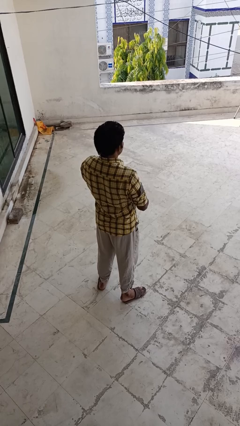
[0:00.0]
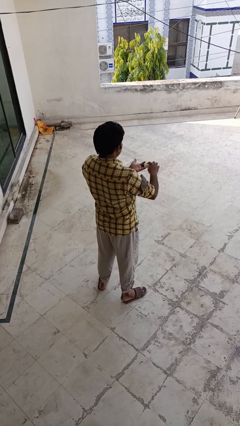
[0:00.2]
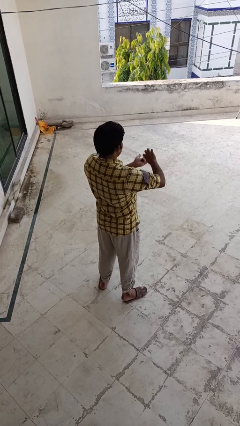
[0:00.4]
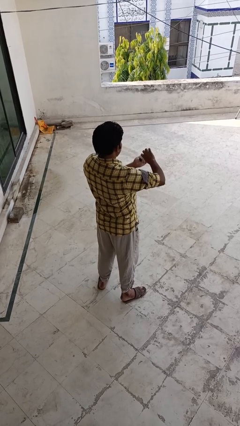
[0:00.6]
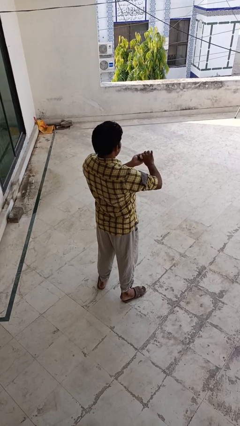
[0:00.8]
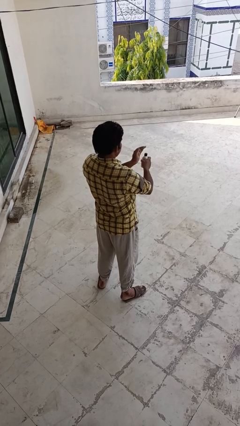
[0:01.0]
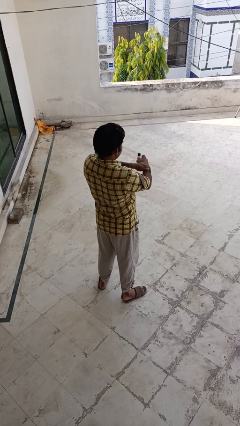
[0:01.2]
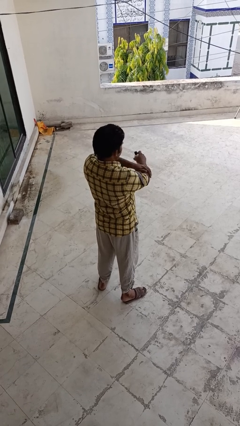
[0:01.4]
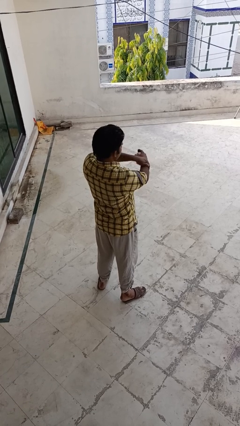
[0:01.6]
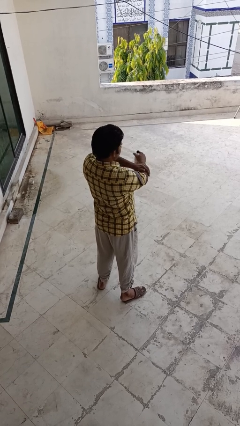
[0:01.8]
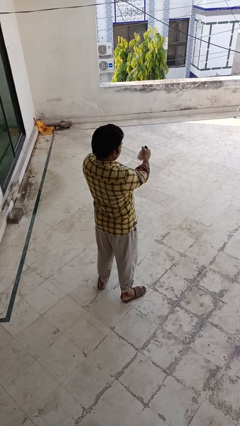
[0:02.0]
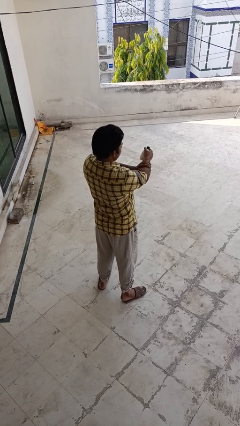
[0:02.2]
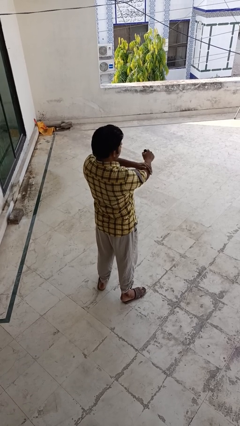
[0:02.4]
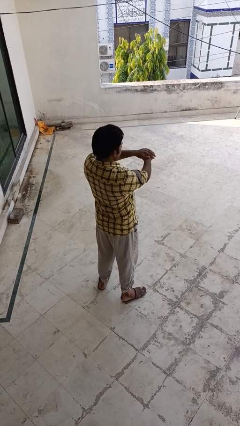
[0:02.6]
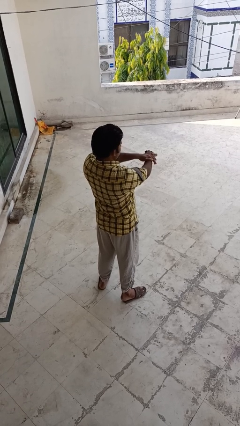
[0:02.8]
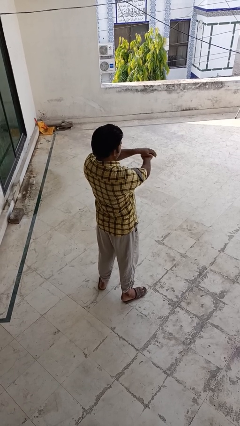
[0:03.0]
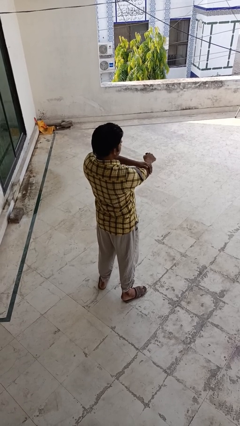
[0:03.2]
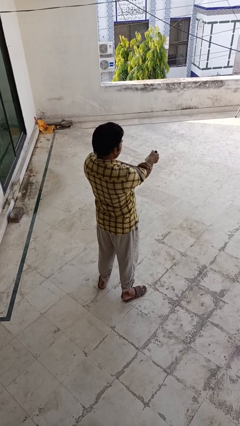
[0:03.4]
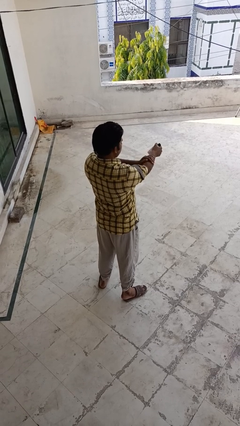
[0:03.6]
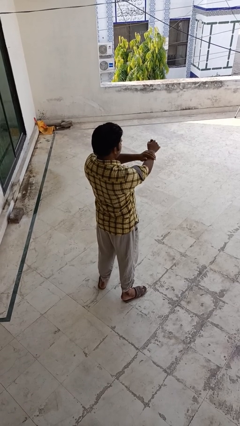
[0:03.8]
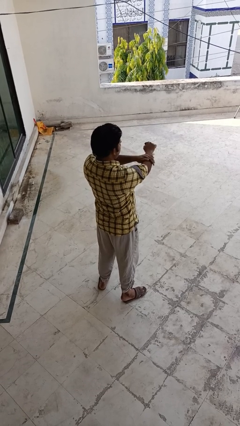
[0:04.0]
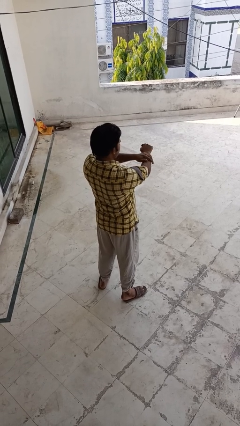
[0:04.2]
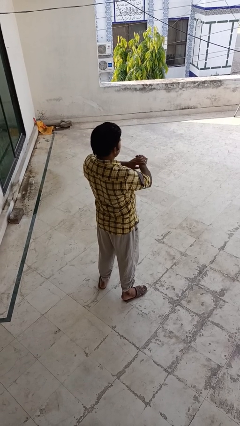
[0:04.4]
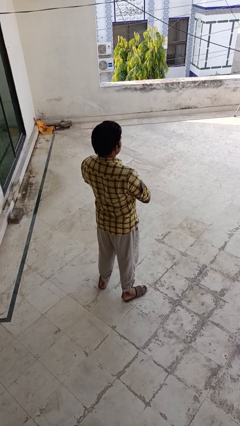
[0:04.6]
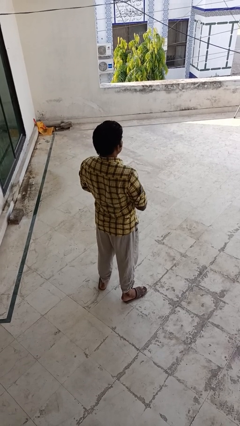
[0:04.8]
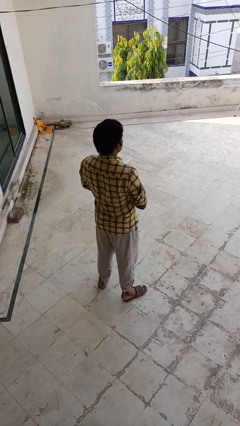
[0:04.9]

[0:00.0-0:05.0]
person applies sunscreen

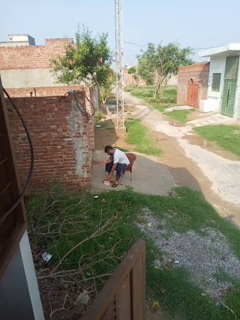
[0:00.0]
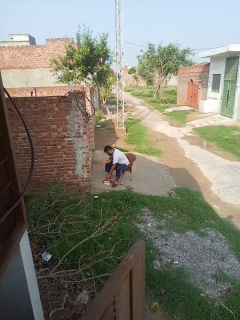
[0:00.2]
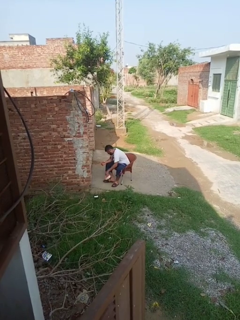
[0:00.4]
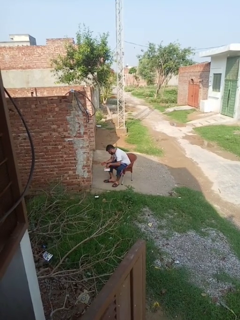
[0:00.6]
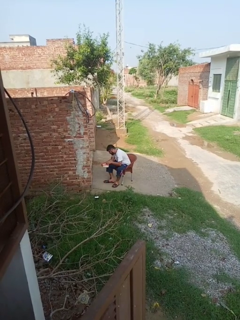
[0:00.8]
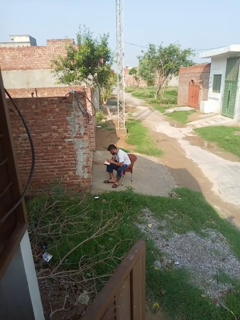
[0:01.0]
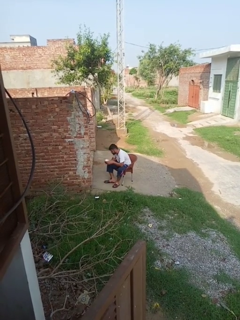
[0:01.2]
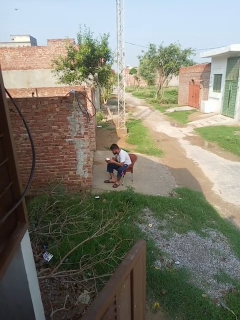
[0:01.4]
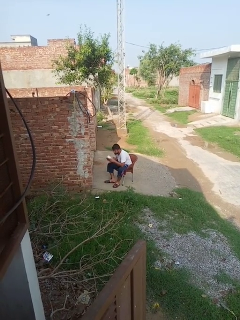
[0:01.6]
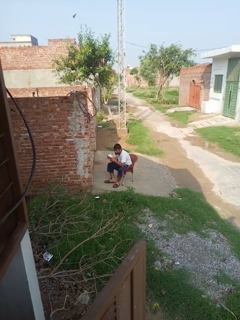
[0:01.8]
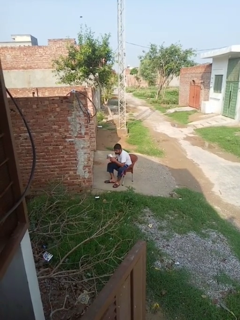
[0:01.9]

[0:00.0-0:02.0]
person picks up object from floor

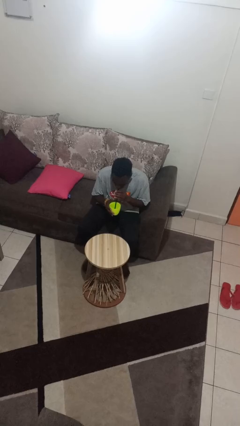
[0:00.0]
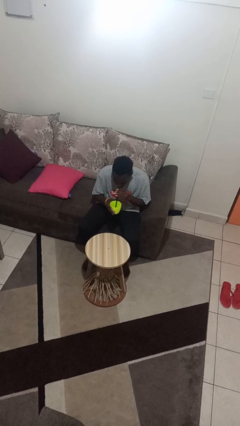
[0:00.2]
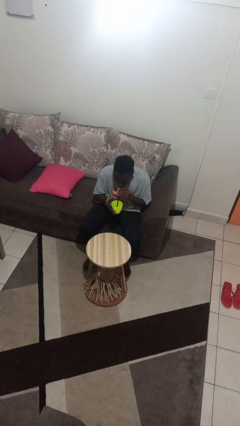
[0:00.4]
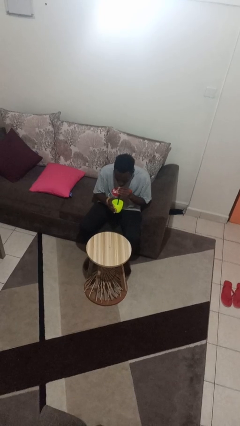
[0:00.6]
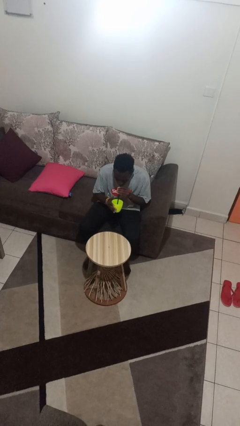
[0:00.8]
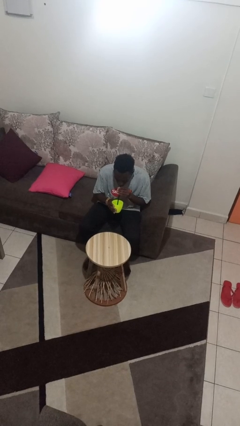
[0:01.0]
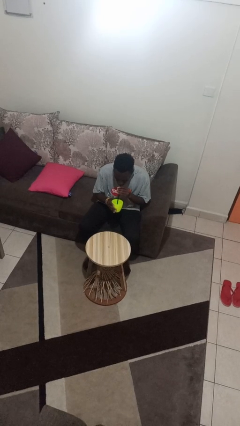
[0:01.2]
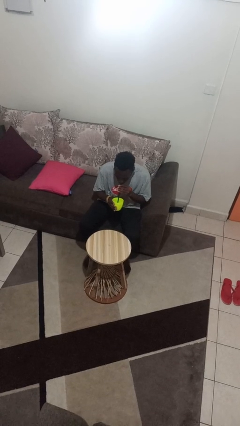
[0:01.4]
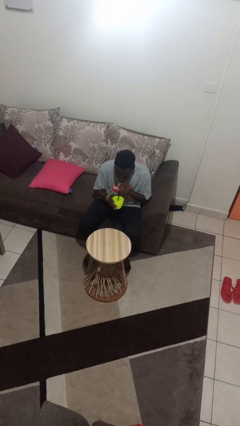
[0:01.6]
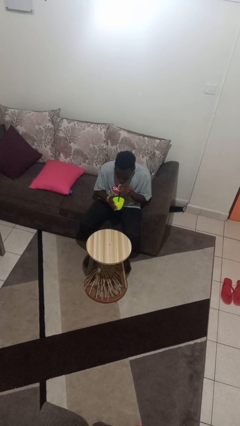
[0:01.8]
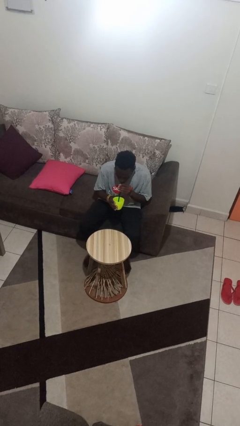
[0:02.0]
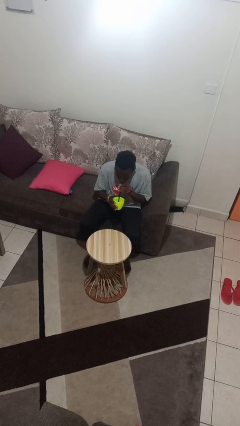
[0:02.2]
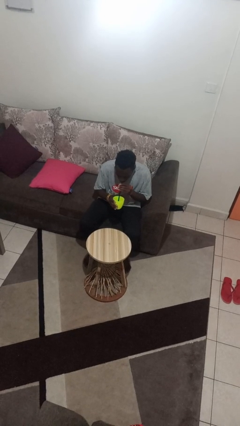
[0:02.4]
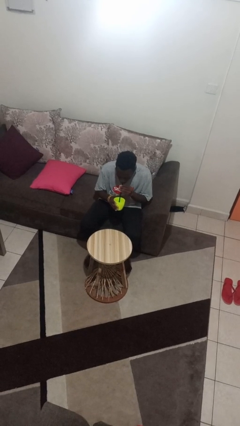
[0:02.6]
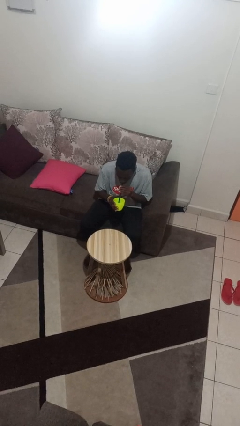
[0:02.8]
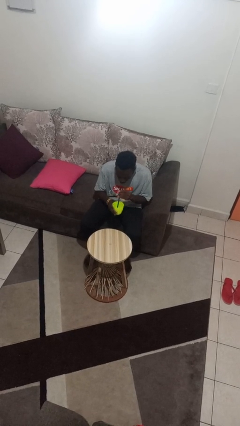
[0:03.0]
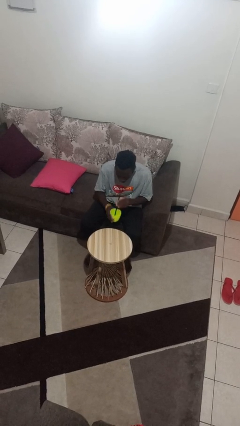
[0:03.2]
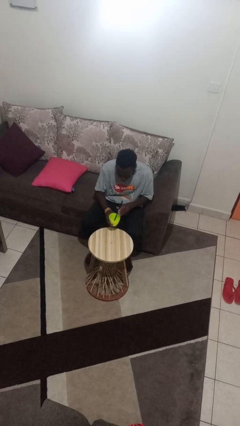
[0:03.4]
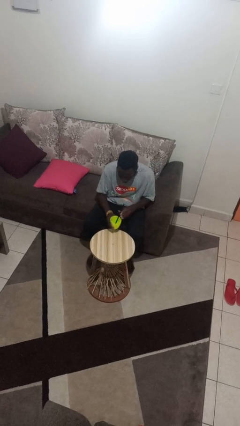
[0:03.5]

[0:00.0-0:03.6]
person drinks from straw

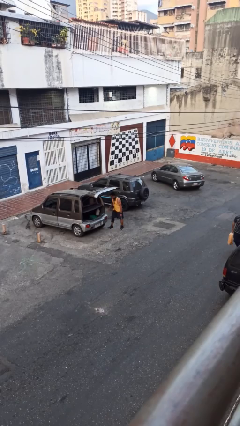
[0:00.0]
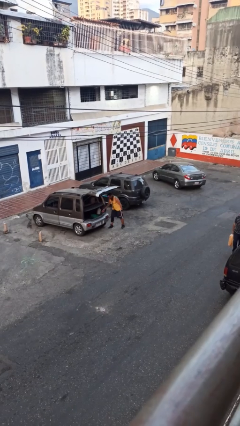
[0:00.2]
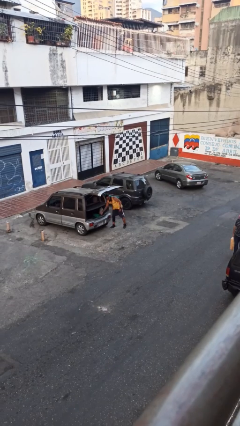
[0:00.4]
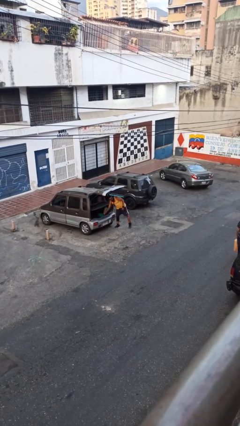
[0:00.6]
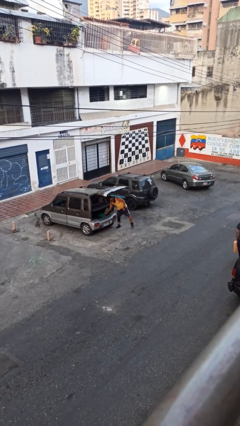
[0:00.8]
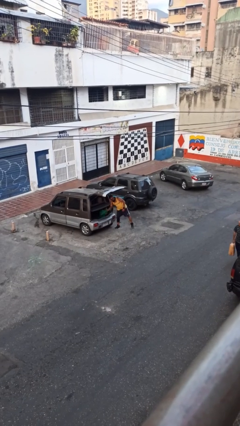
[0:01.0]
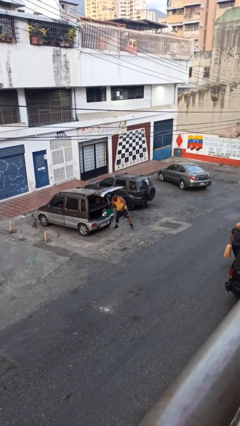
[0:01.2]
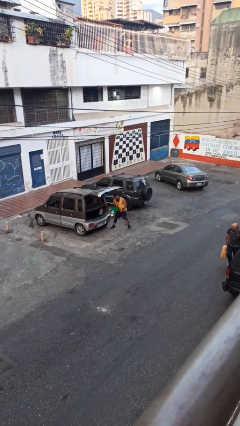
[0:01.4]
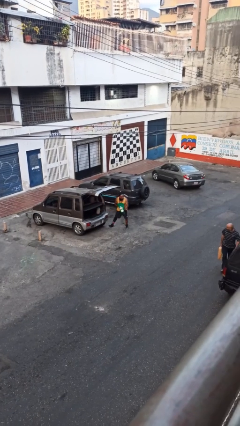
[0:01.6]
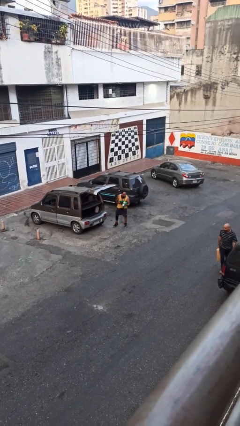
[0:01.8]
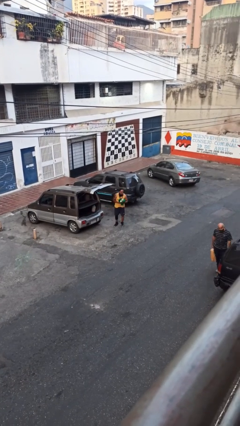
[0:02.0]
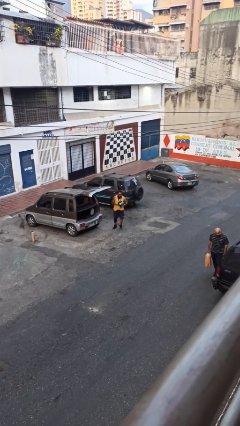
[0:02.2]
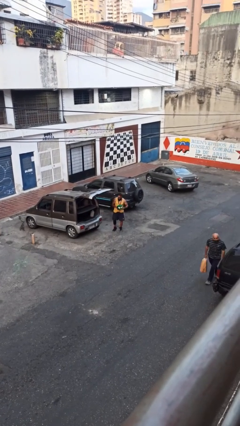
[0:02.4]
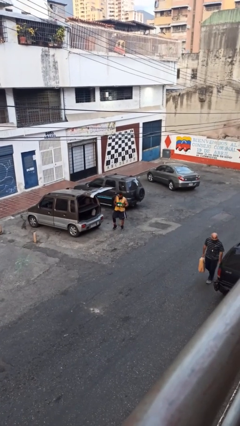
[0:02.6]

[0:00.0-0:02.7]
person unloads car

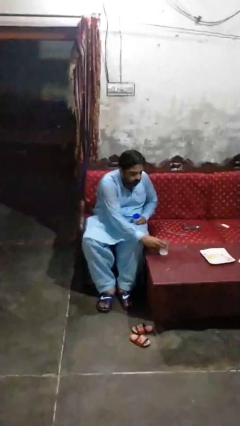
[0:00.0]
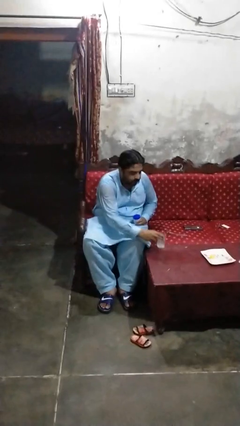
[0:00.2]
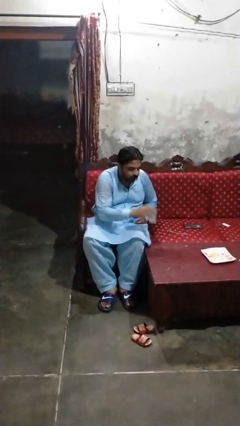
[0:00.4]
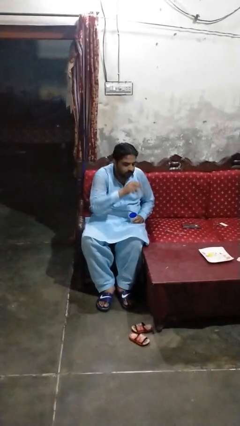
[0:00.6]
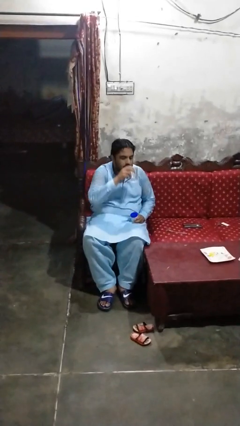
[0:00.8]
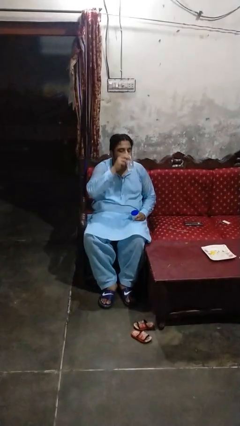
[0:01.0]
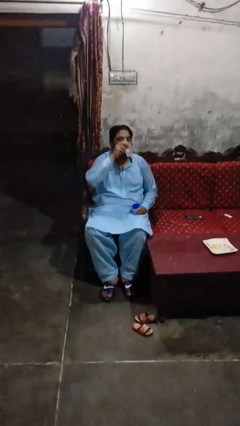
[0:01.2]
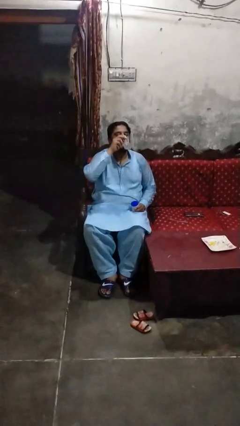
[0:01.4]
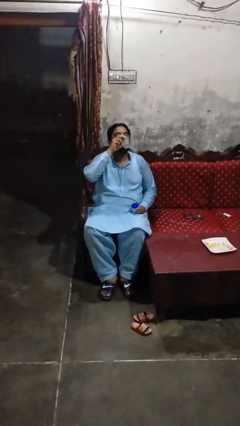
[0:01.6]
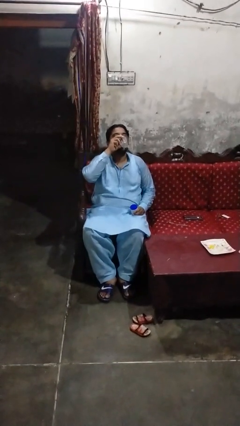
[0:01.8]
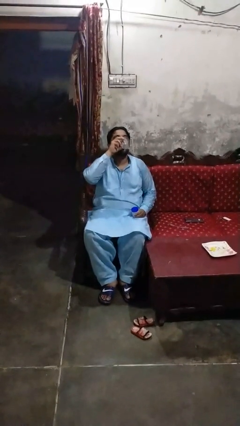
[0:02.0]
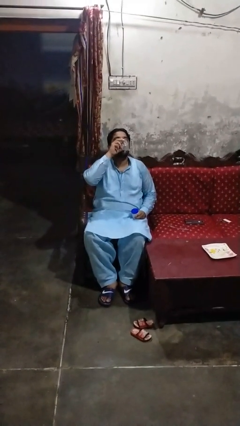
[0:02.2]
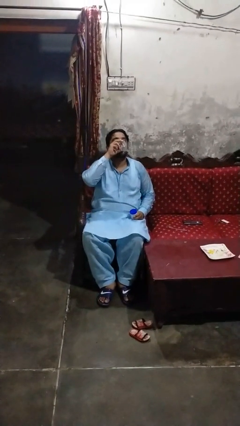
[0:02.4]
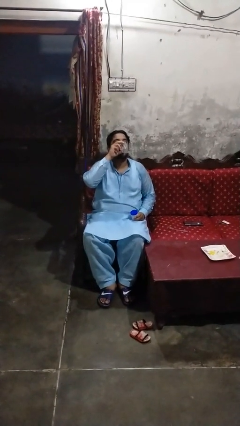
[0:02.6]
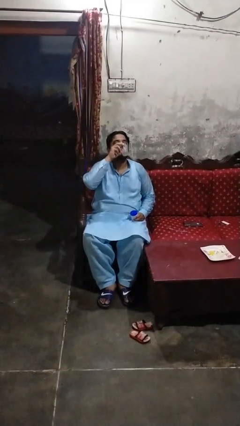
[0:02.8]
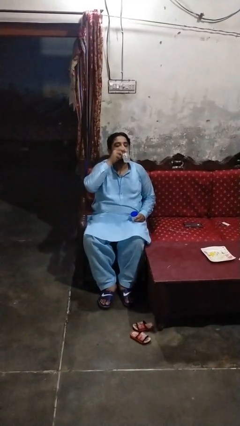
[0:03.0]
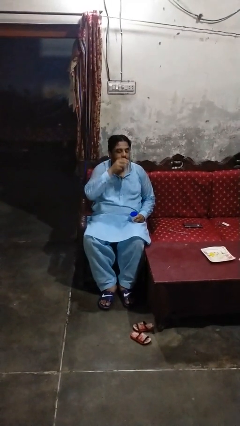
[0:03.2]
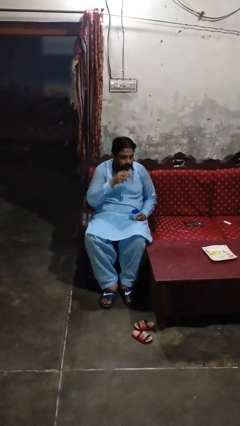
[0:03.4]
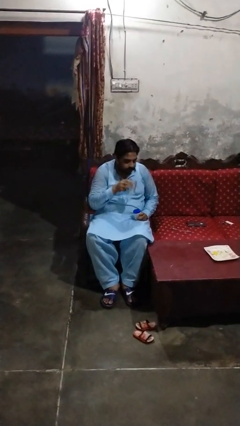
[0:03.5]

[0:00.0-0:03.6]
person drinks from cup

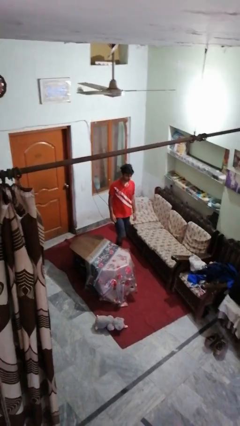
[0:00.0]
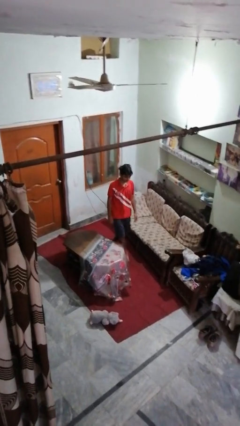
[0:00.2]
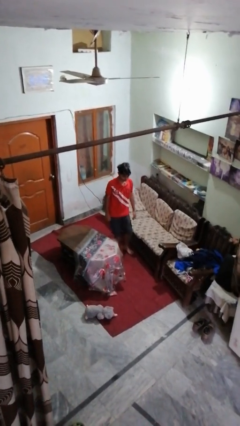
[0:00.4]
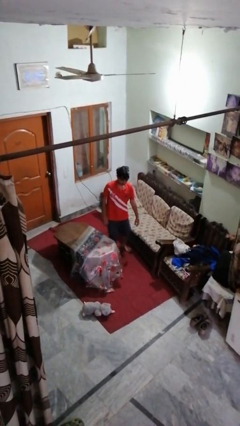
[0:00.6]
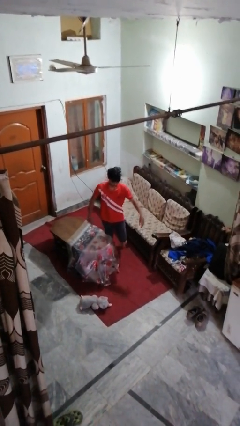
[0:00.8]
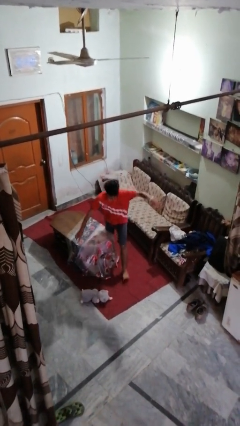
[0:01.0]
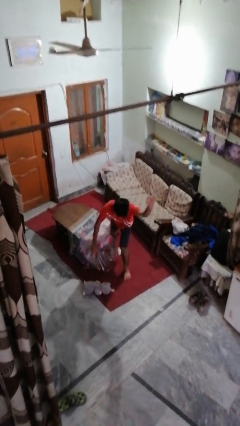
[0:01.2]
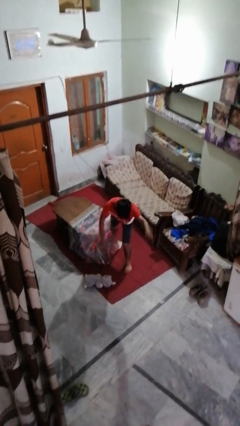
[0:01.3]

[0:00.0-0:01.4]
person trips on object on floor
